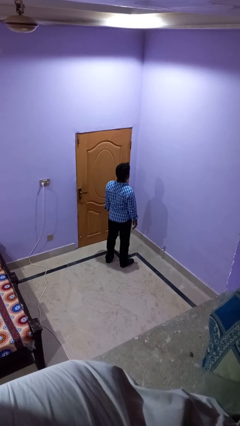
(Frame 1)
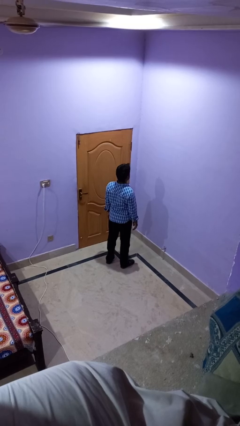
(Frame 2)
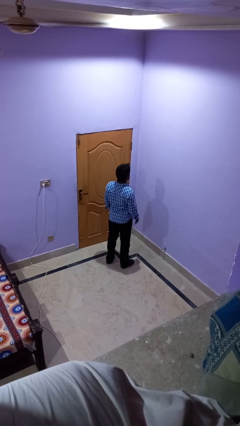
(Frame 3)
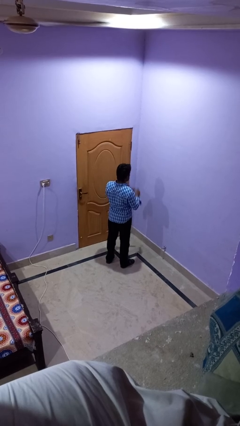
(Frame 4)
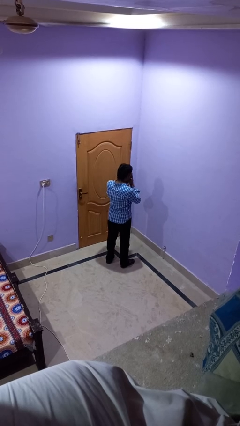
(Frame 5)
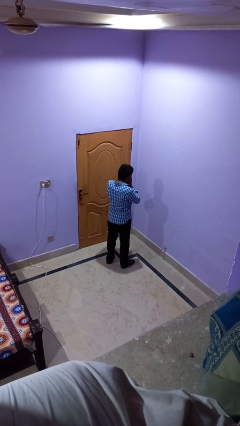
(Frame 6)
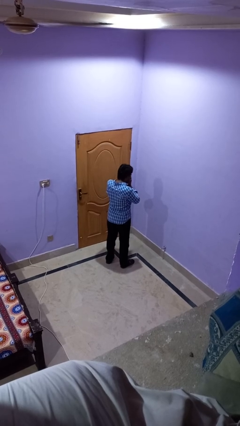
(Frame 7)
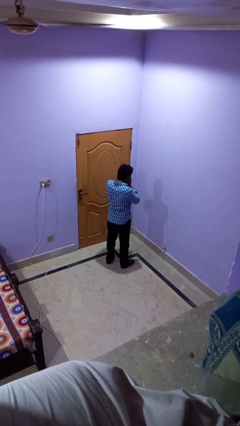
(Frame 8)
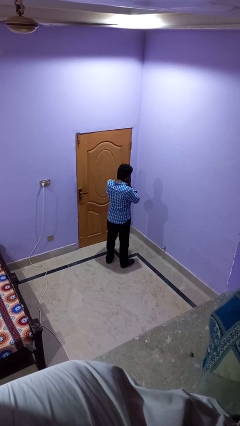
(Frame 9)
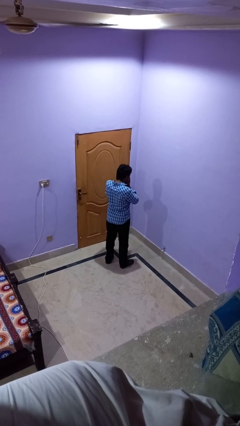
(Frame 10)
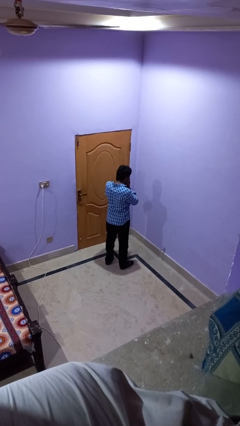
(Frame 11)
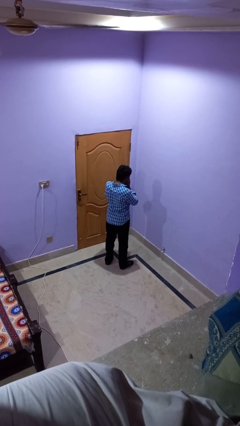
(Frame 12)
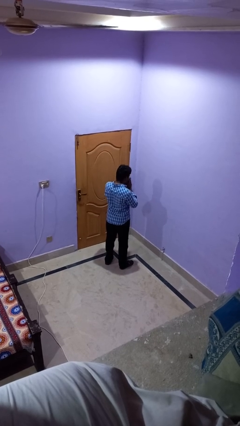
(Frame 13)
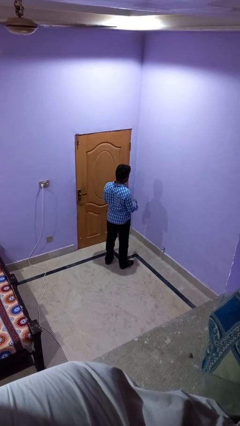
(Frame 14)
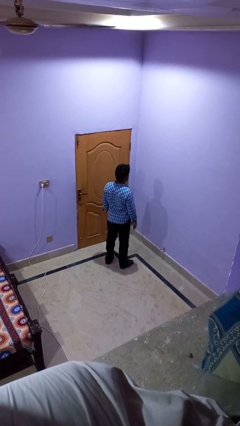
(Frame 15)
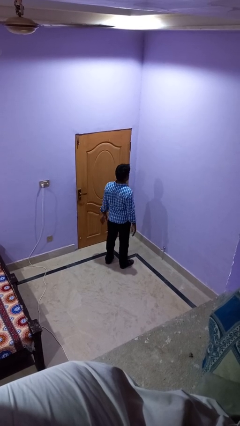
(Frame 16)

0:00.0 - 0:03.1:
person sneezes into hand

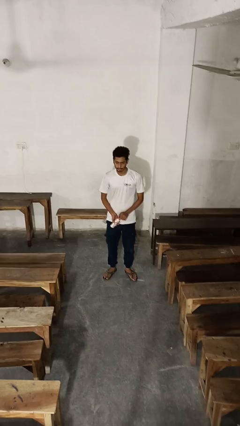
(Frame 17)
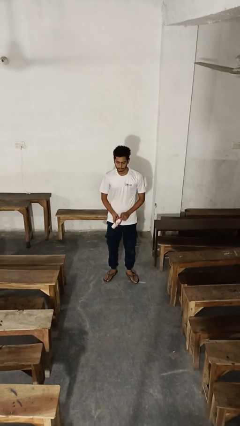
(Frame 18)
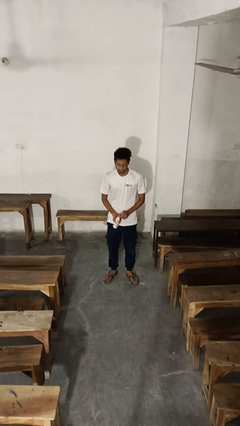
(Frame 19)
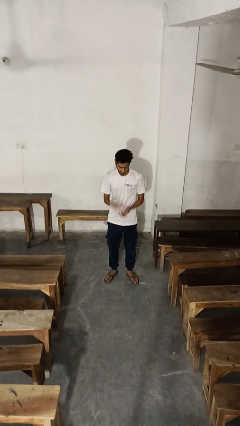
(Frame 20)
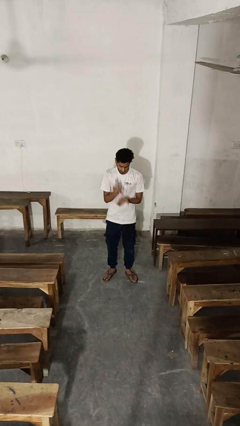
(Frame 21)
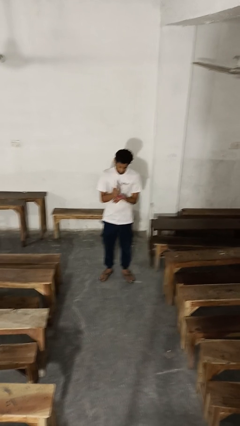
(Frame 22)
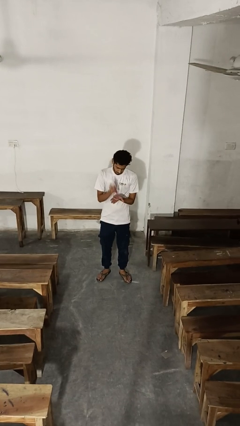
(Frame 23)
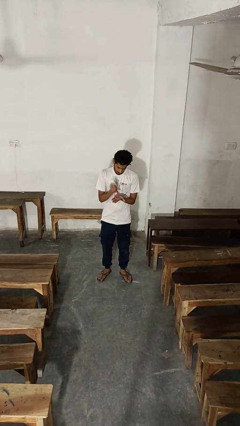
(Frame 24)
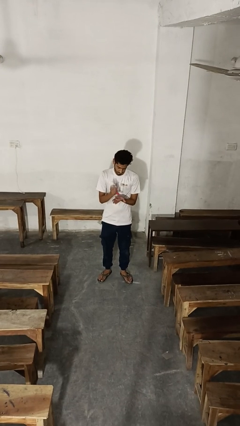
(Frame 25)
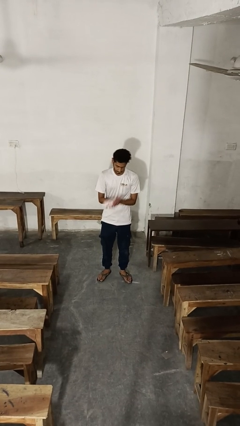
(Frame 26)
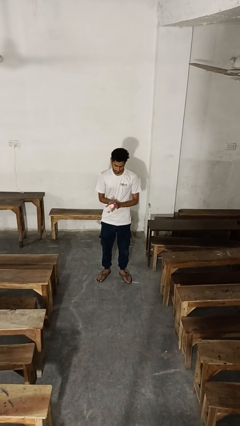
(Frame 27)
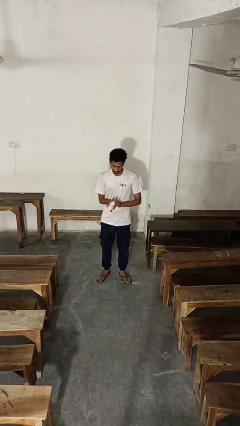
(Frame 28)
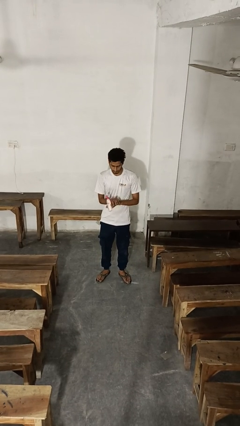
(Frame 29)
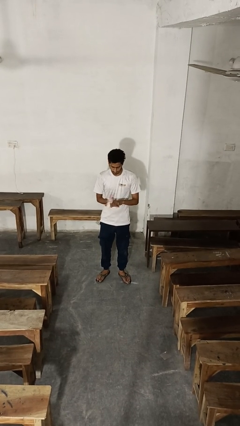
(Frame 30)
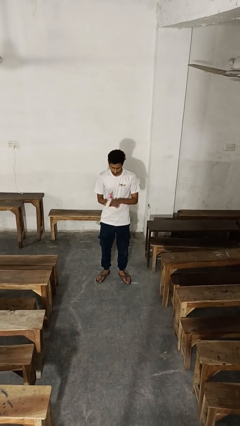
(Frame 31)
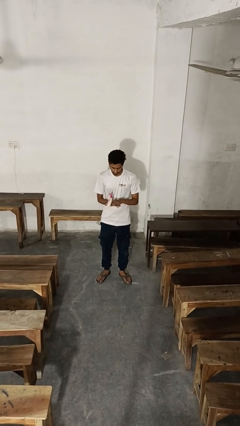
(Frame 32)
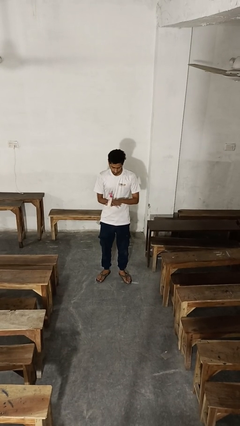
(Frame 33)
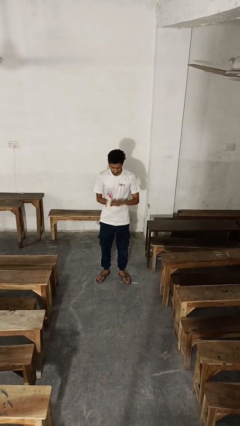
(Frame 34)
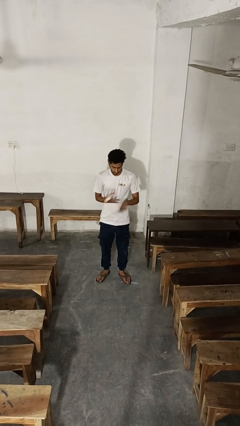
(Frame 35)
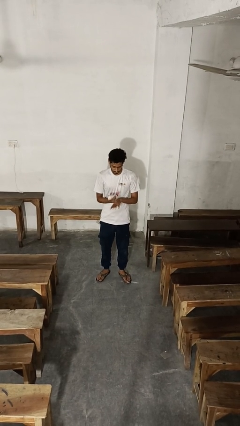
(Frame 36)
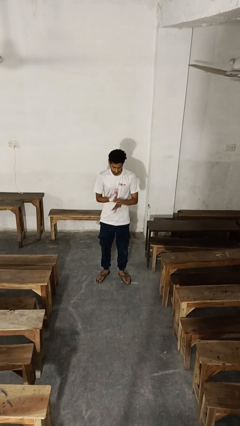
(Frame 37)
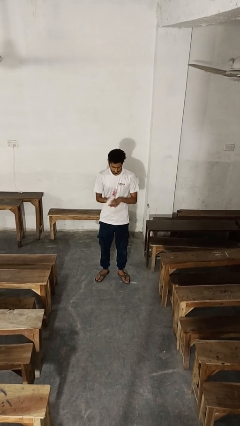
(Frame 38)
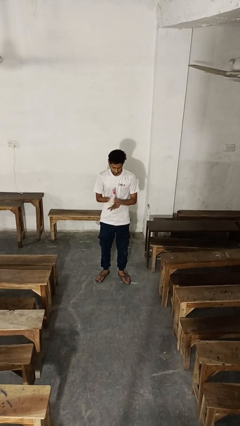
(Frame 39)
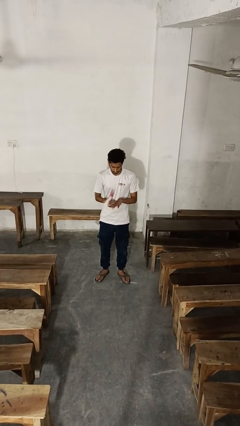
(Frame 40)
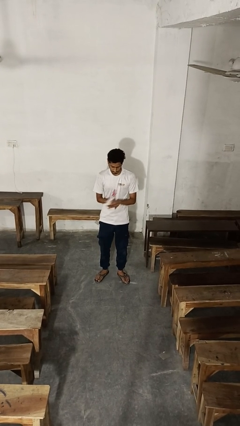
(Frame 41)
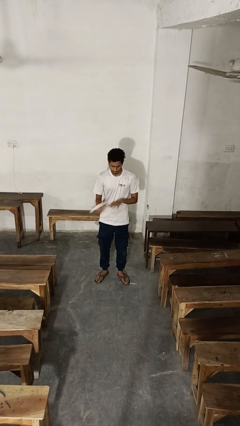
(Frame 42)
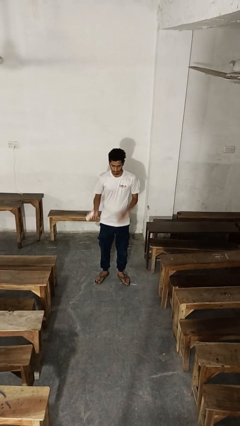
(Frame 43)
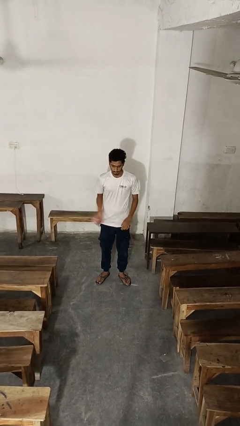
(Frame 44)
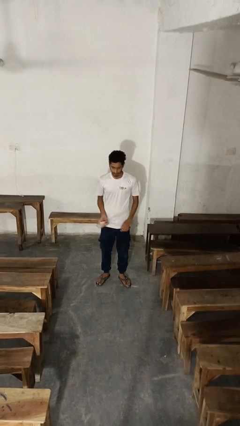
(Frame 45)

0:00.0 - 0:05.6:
person applies sunscreen

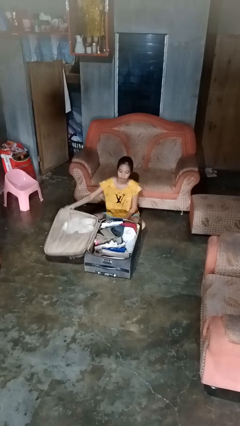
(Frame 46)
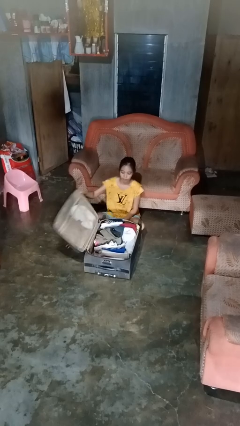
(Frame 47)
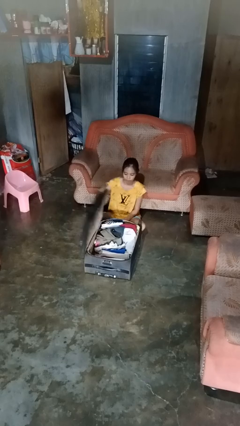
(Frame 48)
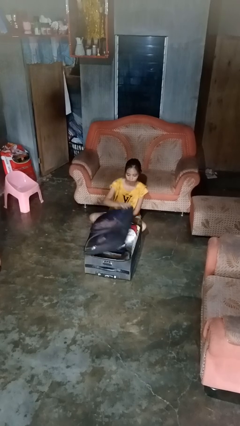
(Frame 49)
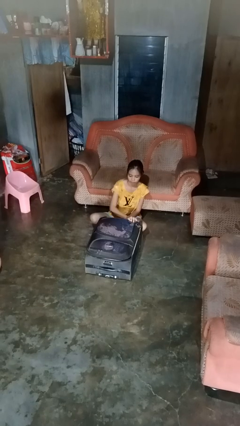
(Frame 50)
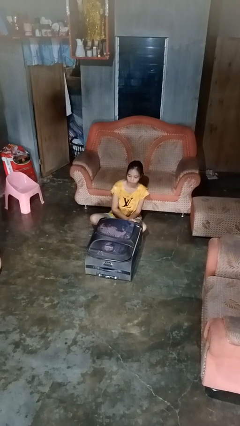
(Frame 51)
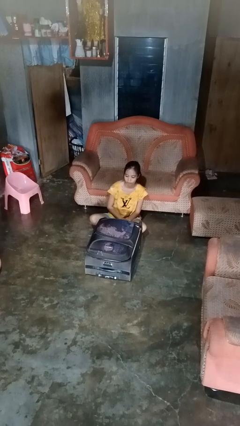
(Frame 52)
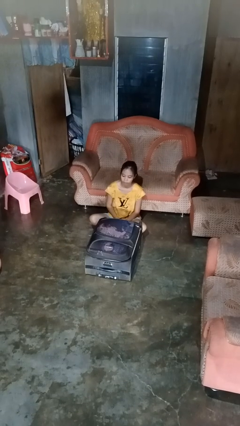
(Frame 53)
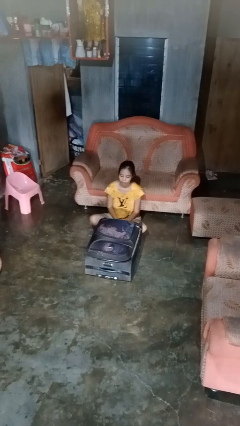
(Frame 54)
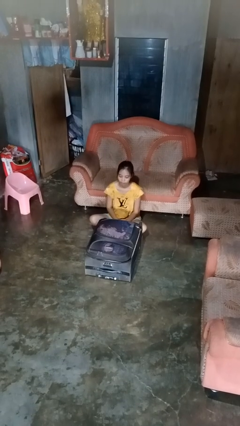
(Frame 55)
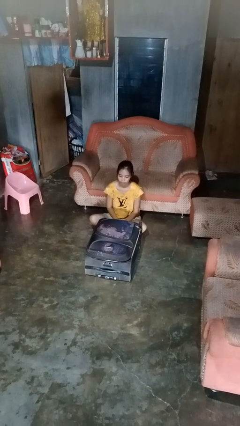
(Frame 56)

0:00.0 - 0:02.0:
person closes suitcase

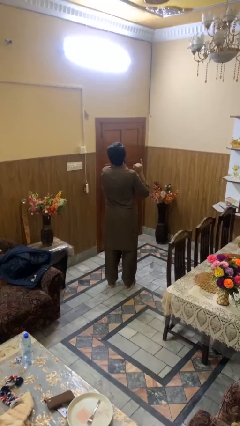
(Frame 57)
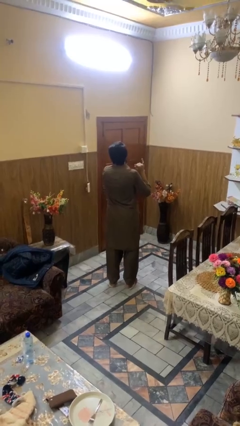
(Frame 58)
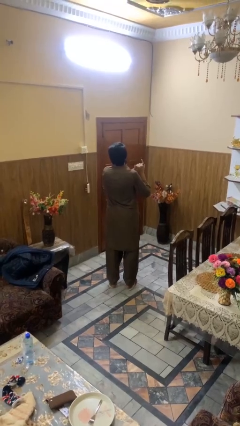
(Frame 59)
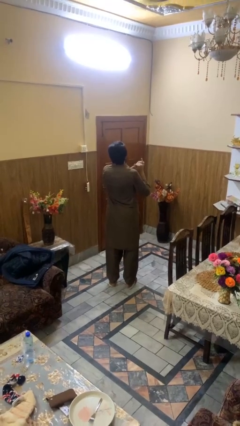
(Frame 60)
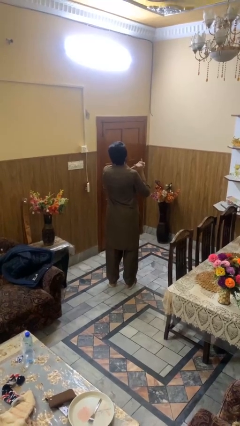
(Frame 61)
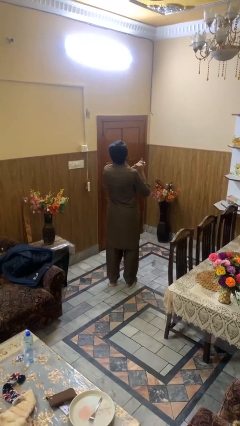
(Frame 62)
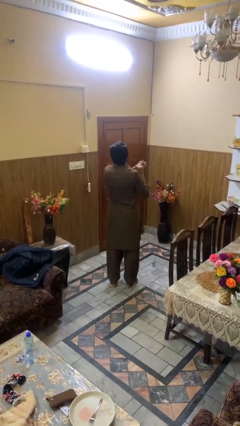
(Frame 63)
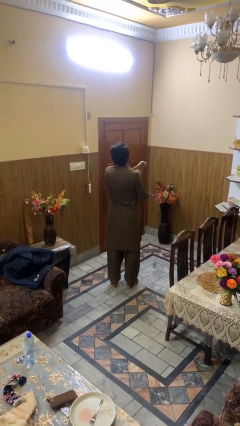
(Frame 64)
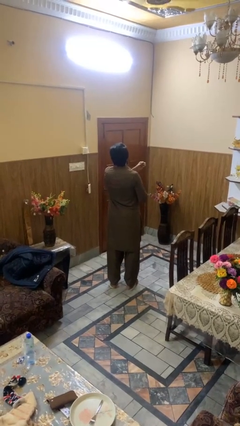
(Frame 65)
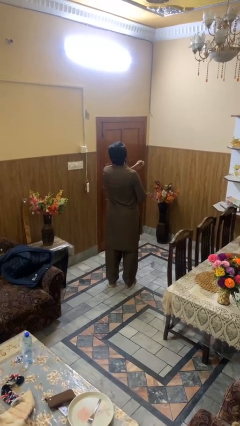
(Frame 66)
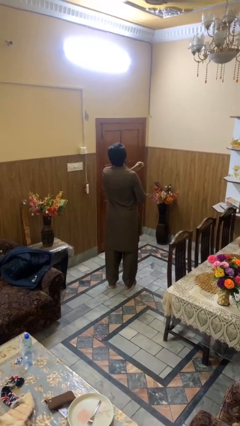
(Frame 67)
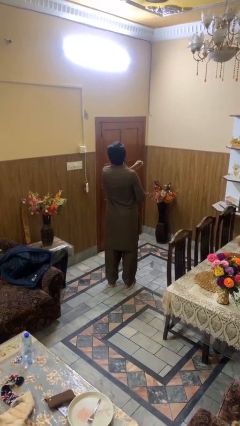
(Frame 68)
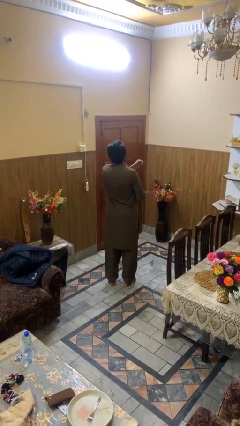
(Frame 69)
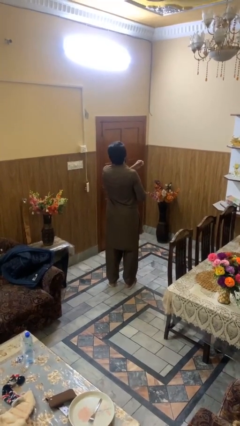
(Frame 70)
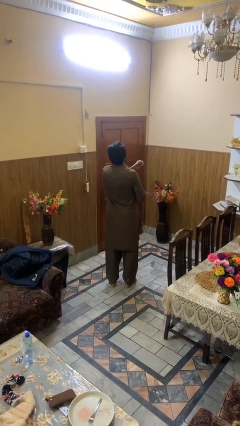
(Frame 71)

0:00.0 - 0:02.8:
person takes off ring

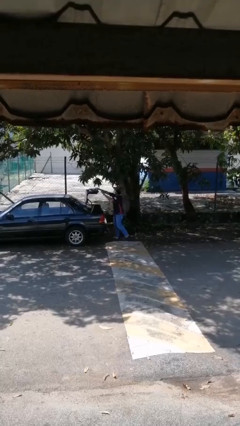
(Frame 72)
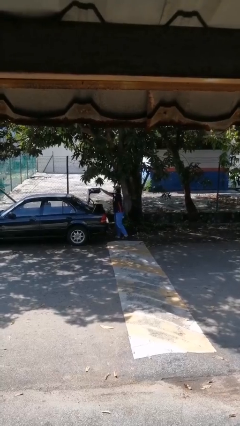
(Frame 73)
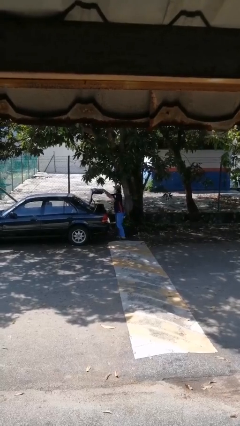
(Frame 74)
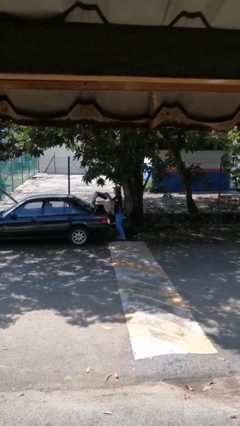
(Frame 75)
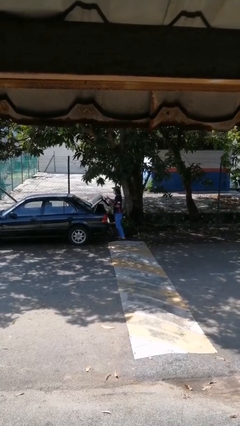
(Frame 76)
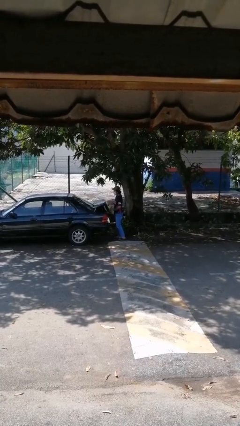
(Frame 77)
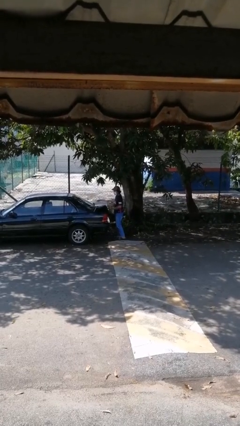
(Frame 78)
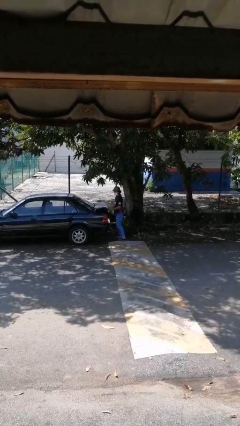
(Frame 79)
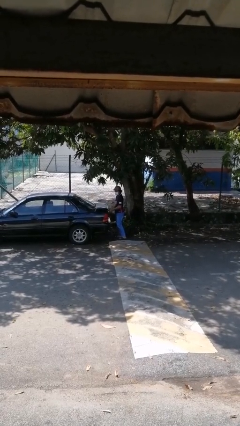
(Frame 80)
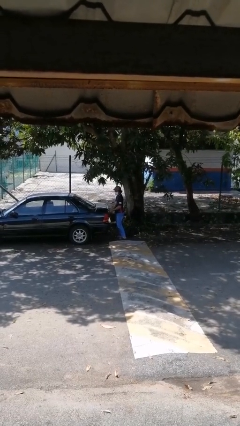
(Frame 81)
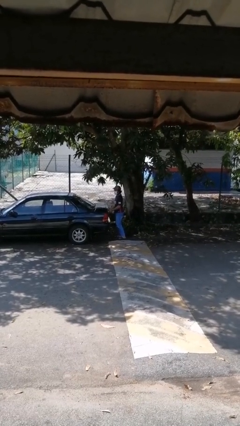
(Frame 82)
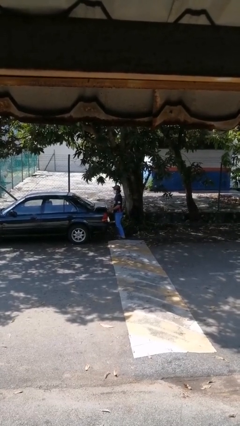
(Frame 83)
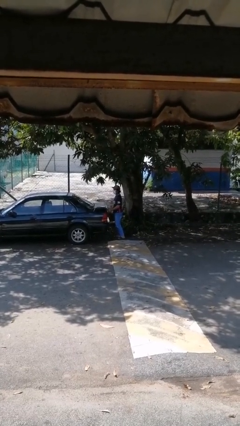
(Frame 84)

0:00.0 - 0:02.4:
person closes car trunk

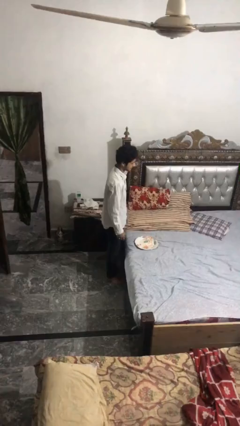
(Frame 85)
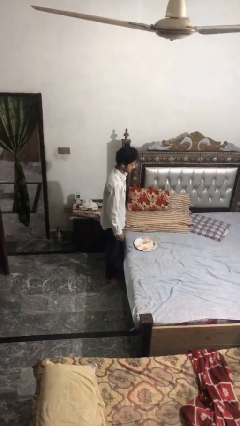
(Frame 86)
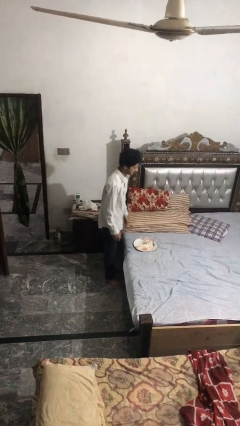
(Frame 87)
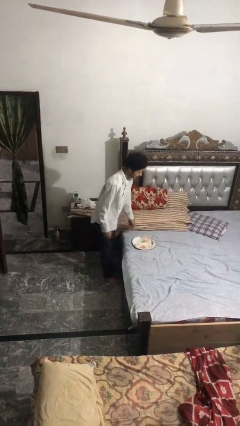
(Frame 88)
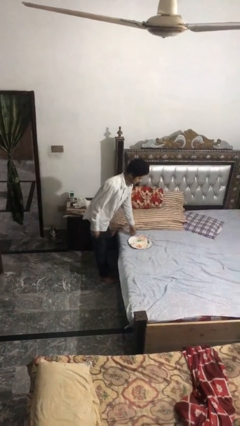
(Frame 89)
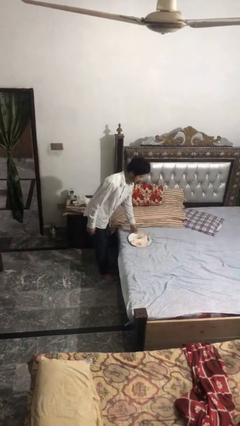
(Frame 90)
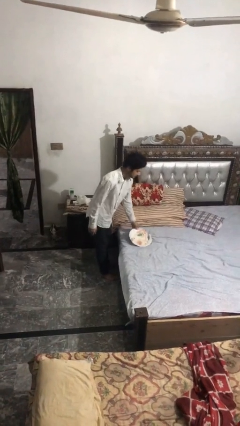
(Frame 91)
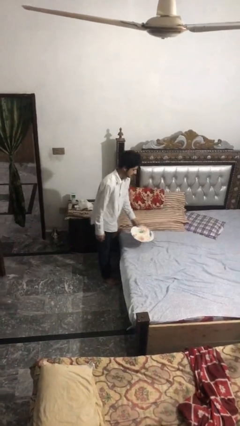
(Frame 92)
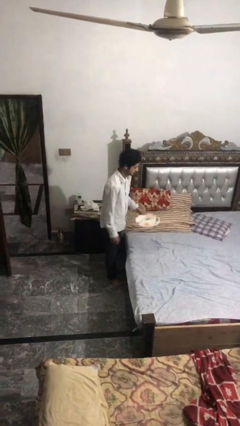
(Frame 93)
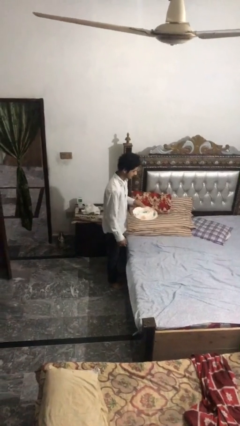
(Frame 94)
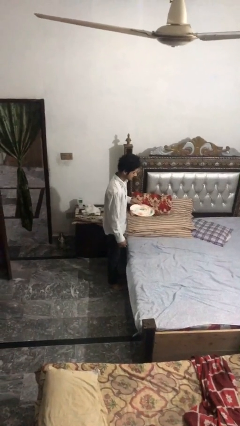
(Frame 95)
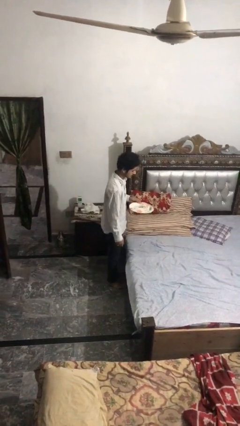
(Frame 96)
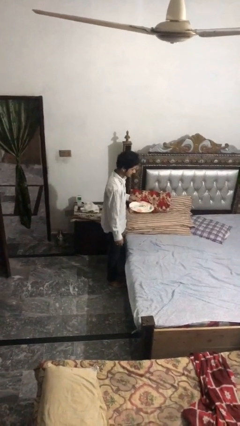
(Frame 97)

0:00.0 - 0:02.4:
person picks up object from bed
